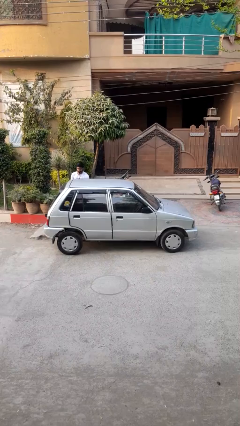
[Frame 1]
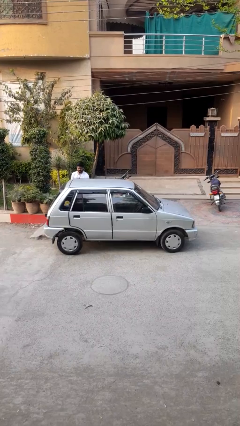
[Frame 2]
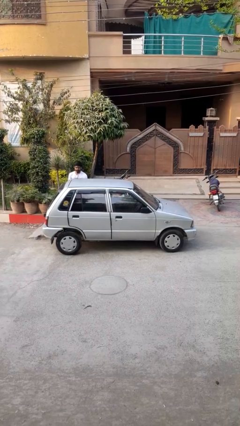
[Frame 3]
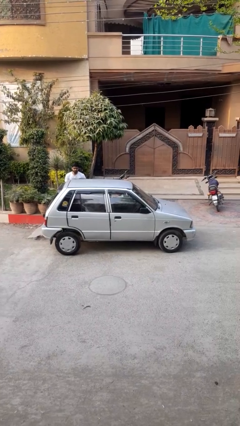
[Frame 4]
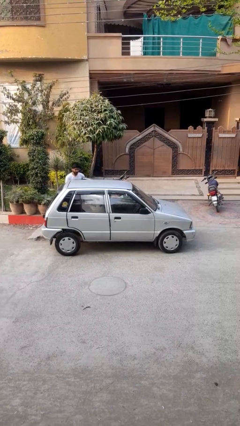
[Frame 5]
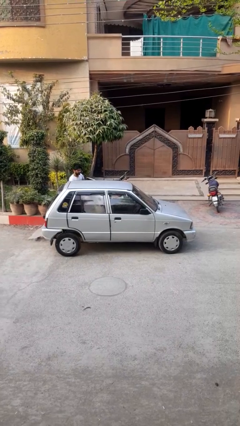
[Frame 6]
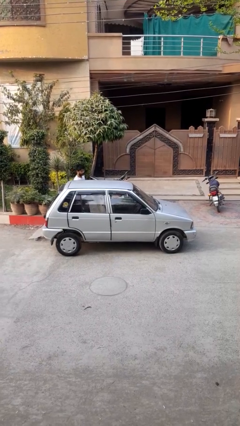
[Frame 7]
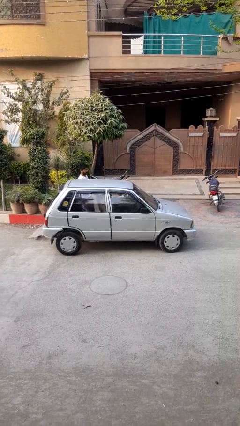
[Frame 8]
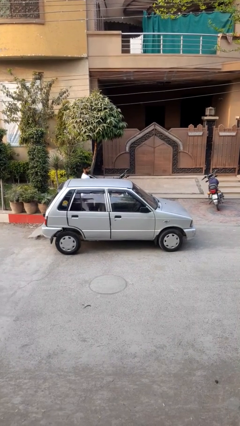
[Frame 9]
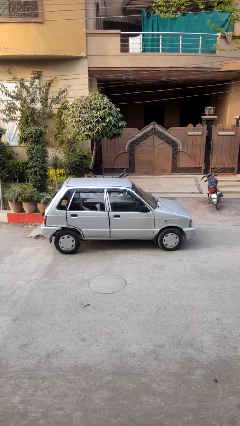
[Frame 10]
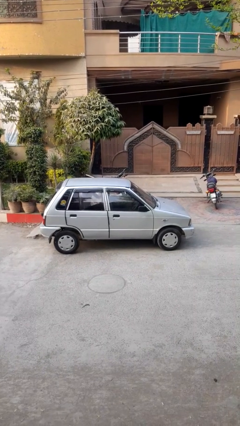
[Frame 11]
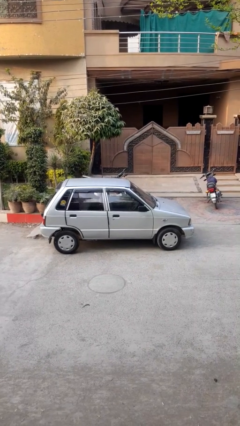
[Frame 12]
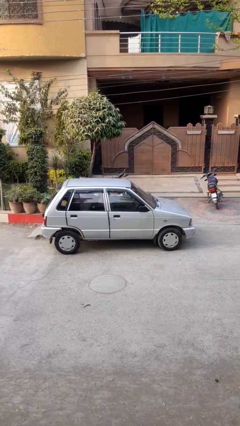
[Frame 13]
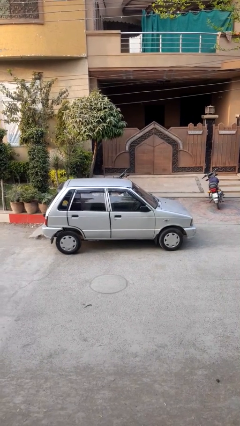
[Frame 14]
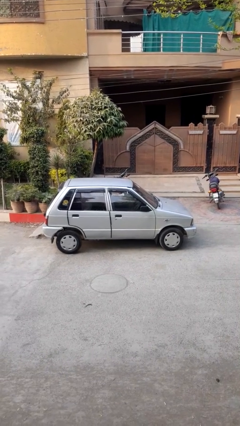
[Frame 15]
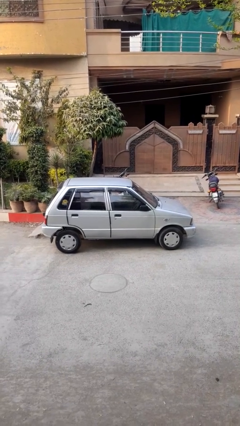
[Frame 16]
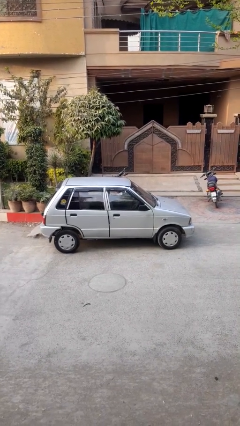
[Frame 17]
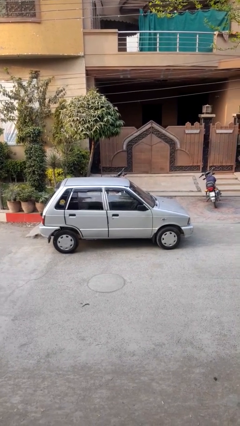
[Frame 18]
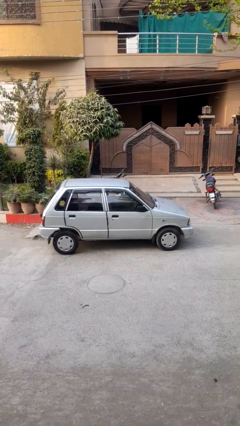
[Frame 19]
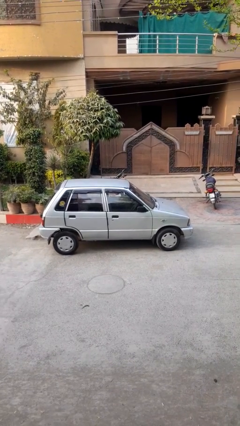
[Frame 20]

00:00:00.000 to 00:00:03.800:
car picks up person

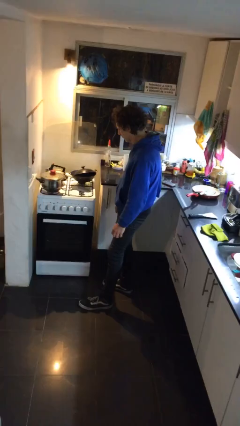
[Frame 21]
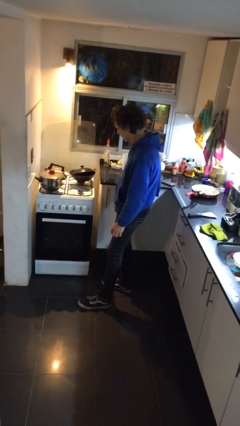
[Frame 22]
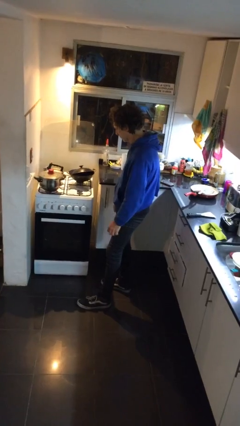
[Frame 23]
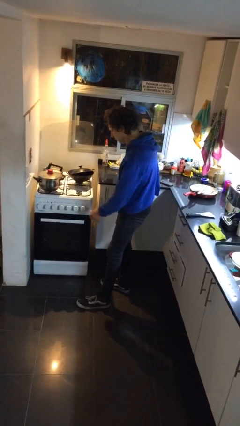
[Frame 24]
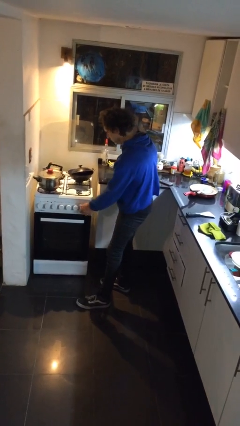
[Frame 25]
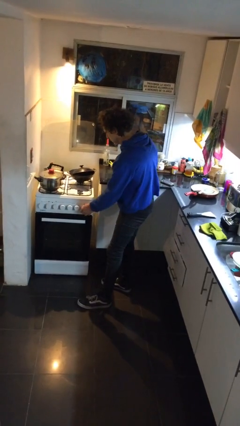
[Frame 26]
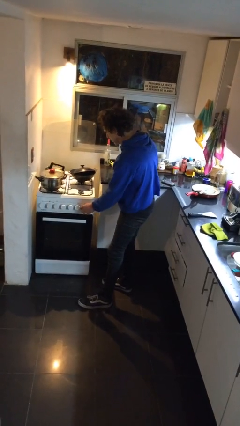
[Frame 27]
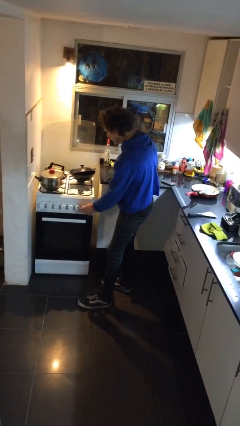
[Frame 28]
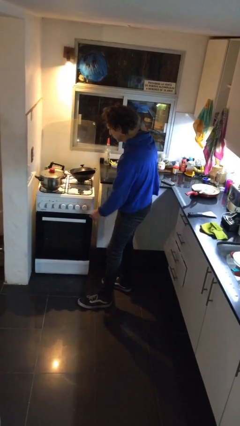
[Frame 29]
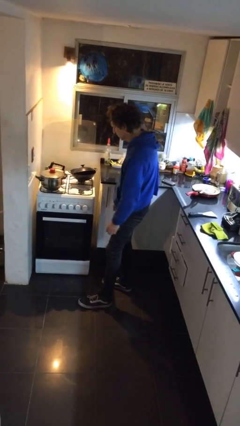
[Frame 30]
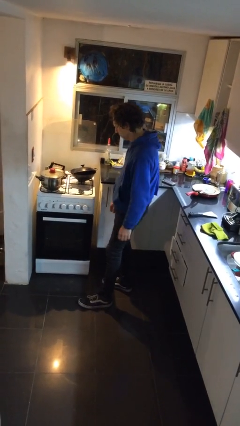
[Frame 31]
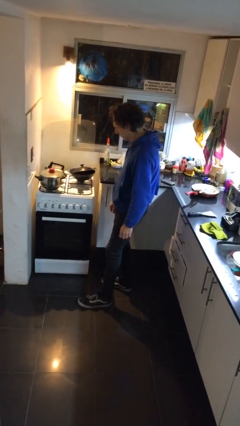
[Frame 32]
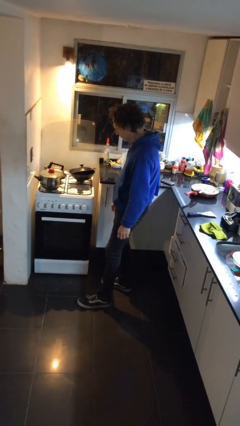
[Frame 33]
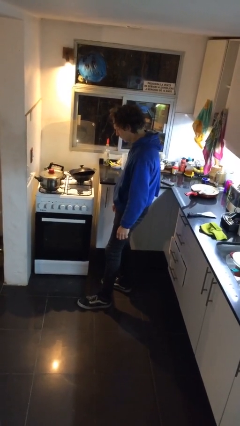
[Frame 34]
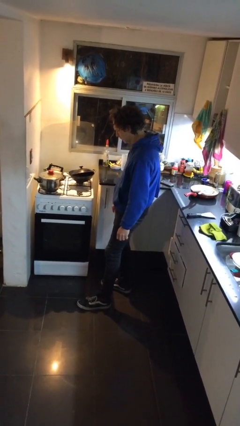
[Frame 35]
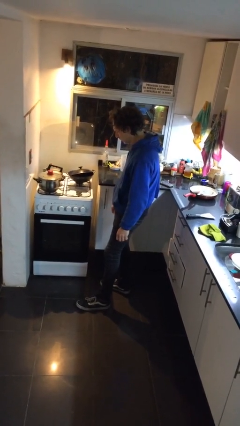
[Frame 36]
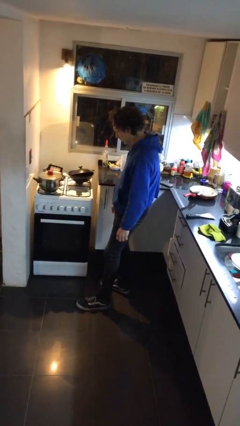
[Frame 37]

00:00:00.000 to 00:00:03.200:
person turns off stovetop

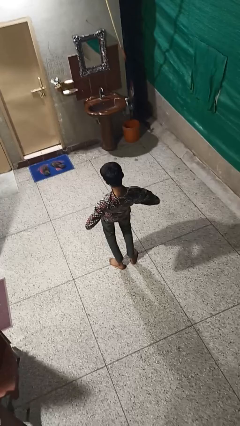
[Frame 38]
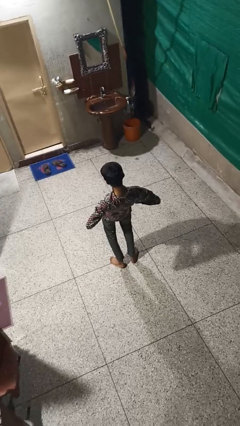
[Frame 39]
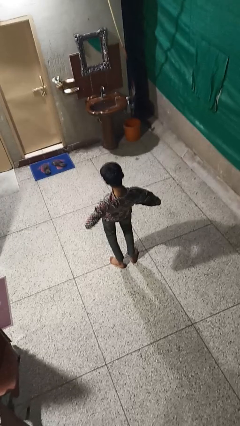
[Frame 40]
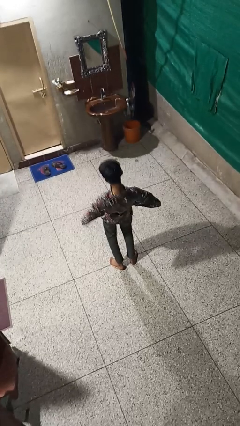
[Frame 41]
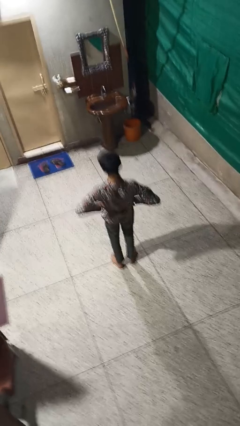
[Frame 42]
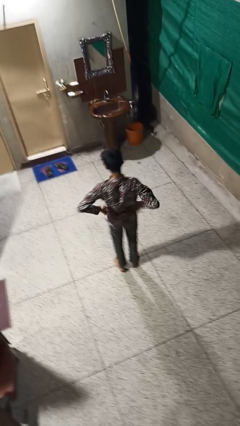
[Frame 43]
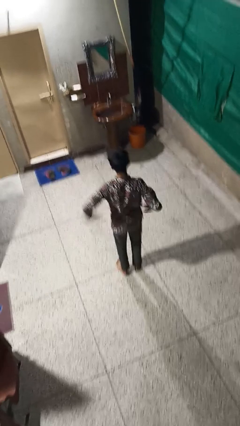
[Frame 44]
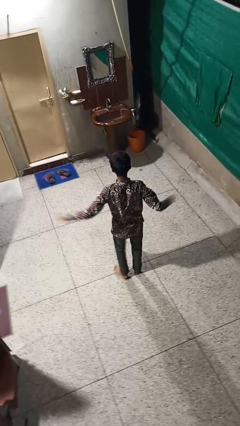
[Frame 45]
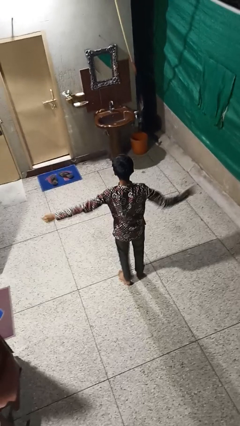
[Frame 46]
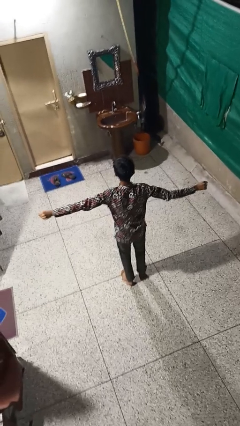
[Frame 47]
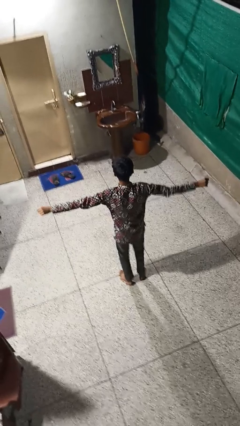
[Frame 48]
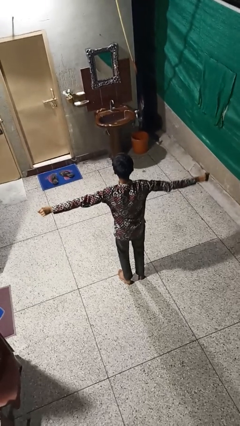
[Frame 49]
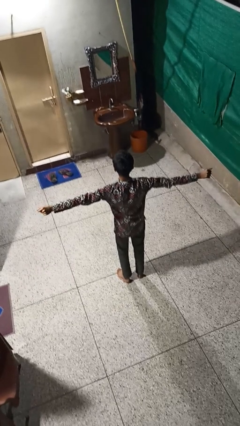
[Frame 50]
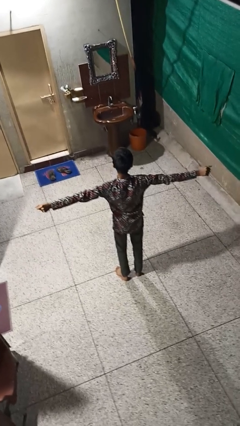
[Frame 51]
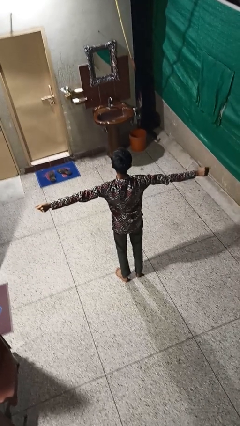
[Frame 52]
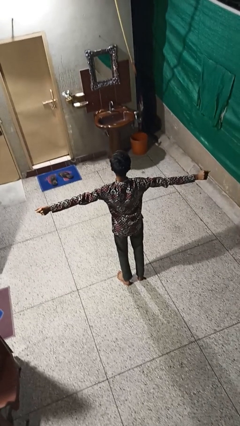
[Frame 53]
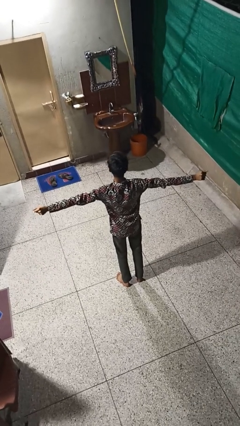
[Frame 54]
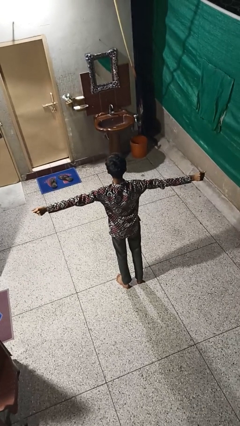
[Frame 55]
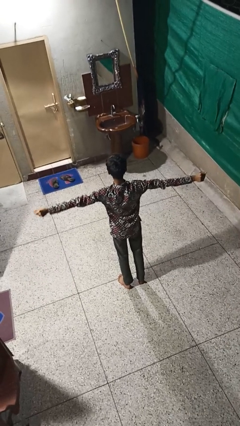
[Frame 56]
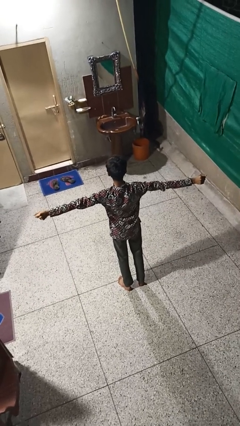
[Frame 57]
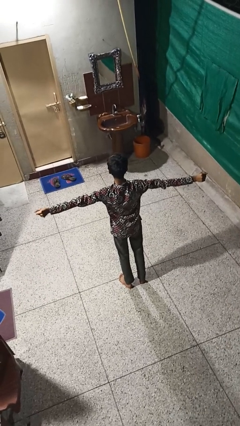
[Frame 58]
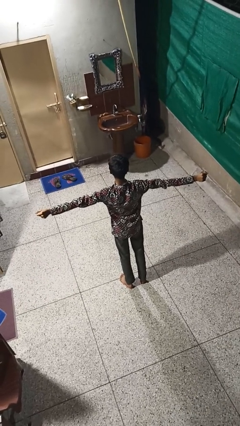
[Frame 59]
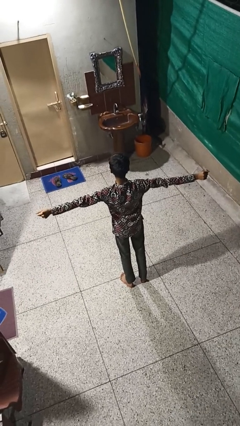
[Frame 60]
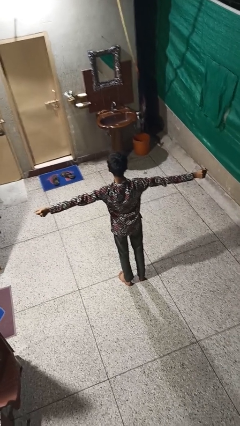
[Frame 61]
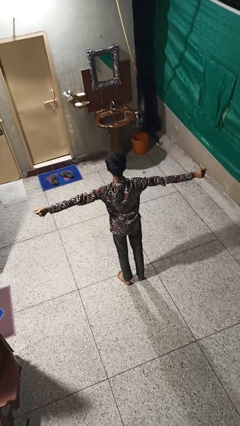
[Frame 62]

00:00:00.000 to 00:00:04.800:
person stretches arms to side

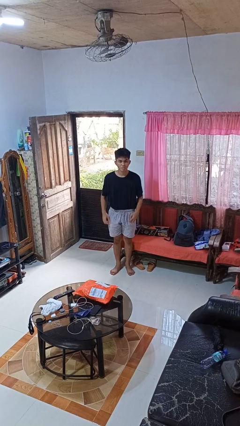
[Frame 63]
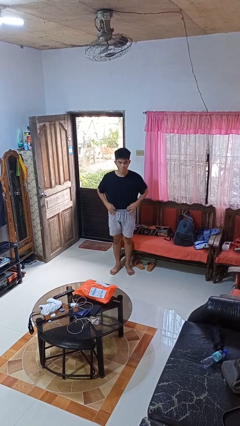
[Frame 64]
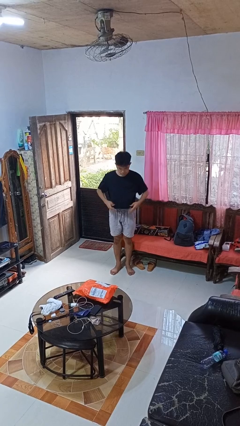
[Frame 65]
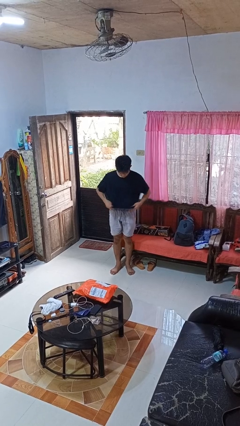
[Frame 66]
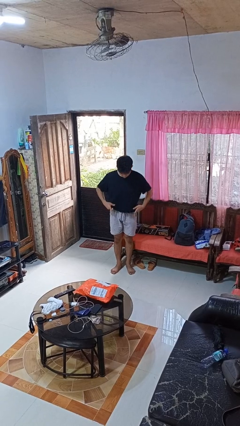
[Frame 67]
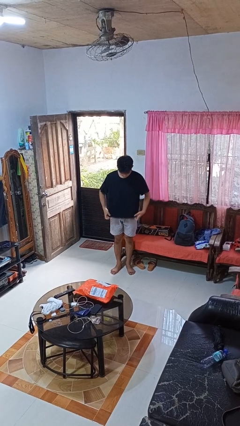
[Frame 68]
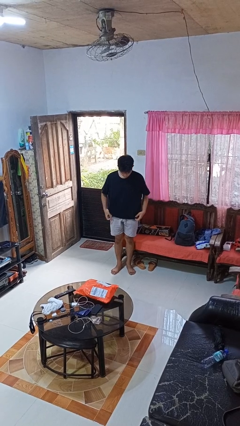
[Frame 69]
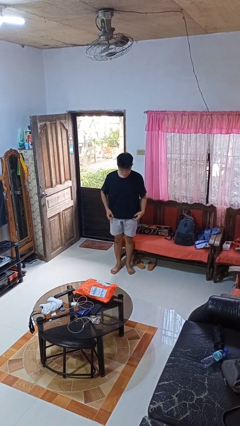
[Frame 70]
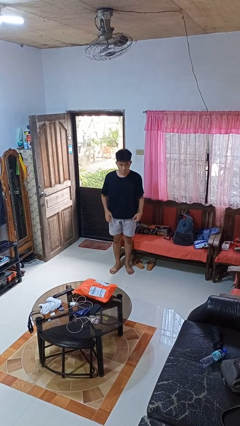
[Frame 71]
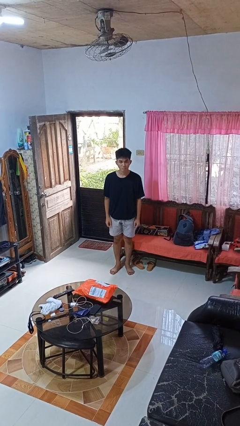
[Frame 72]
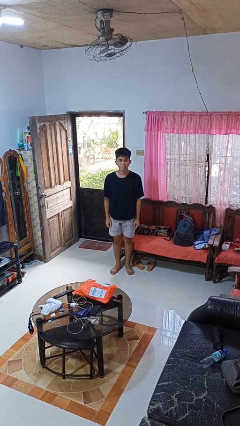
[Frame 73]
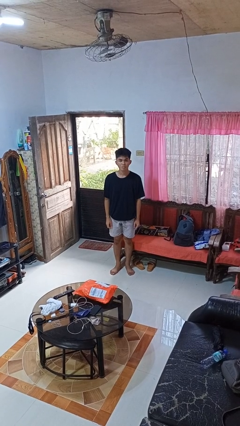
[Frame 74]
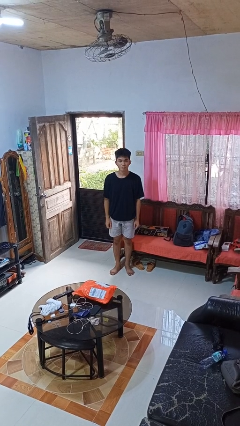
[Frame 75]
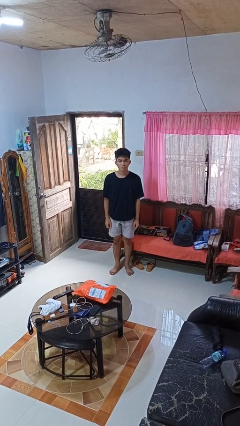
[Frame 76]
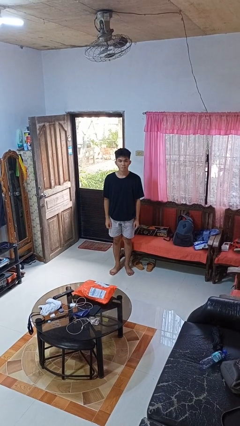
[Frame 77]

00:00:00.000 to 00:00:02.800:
person untucks shirt

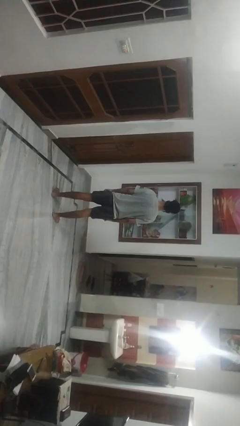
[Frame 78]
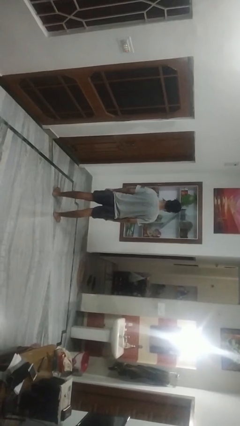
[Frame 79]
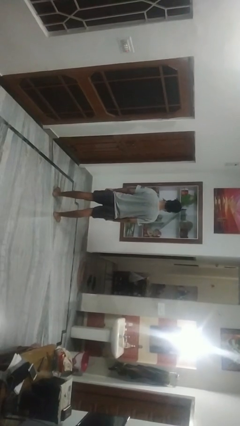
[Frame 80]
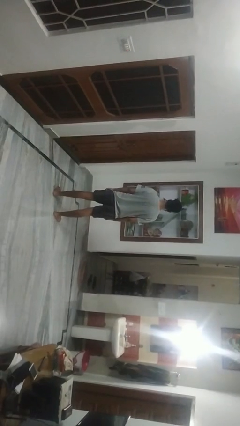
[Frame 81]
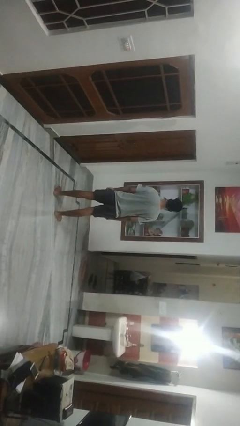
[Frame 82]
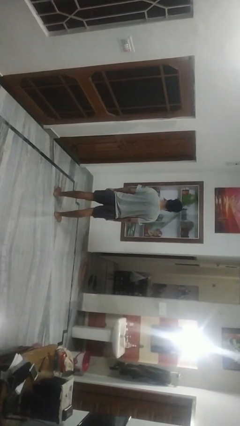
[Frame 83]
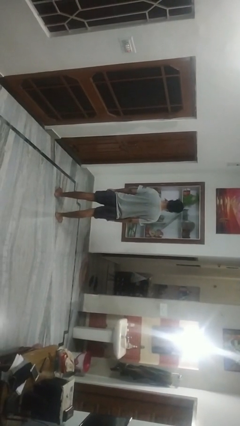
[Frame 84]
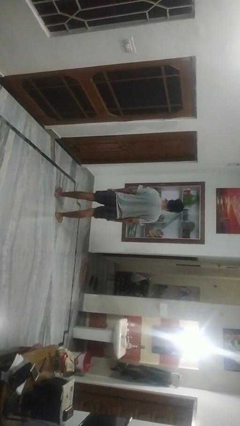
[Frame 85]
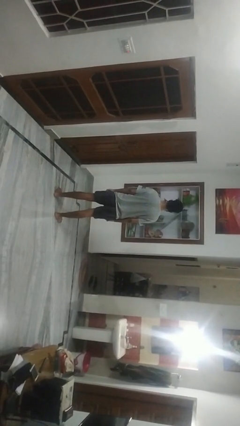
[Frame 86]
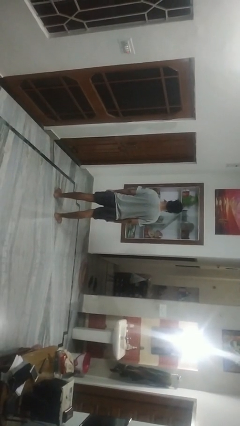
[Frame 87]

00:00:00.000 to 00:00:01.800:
person gestures lower hand

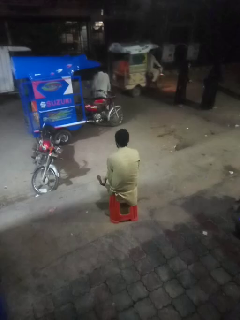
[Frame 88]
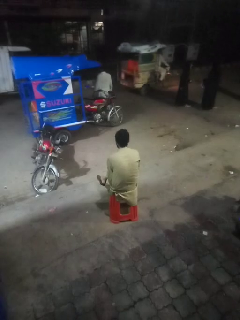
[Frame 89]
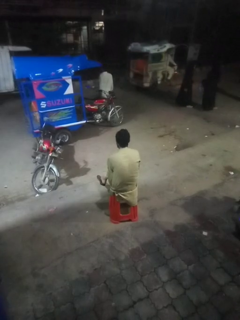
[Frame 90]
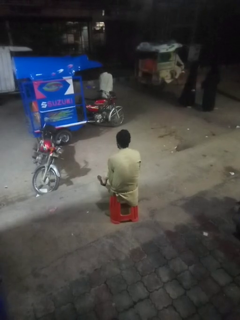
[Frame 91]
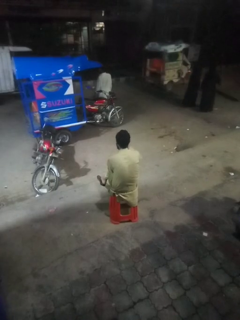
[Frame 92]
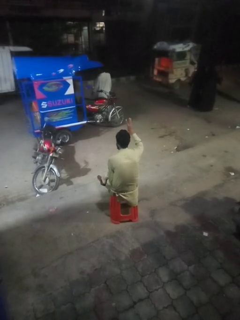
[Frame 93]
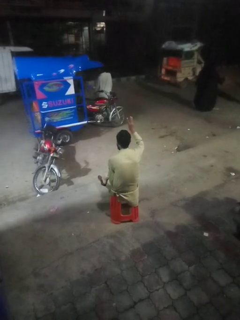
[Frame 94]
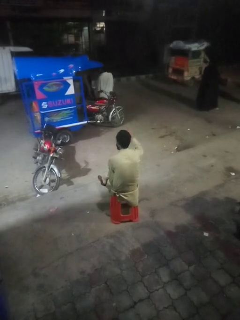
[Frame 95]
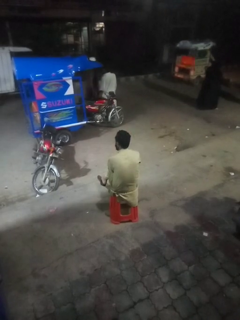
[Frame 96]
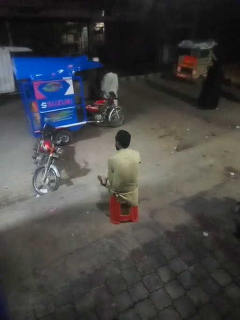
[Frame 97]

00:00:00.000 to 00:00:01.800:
person gestures number three
